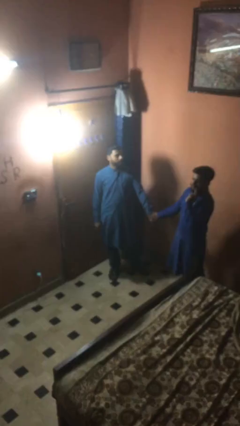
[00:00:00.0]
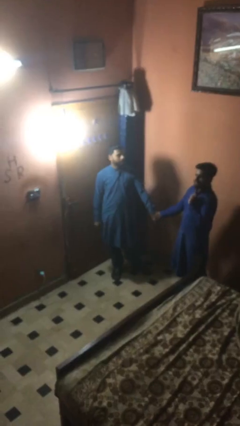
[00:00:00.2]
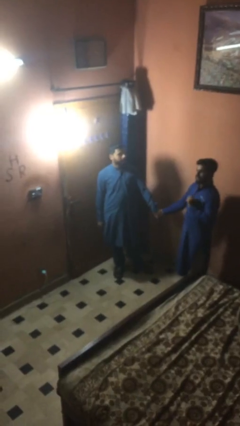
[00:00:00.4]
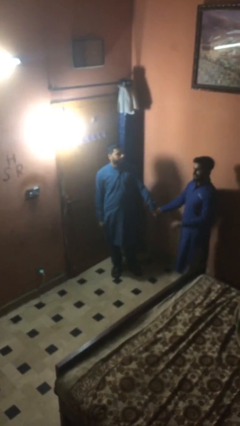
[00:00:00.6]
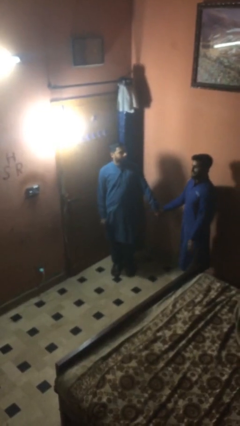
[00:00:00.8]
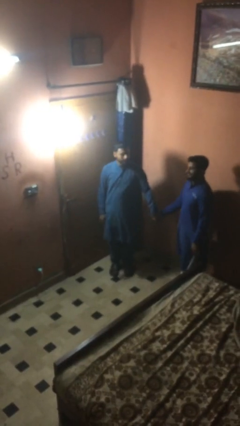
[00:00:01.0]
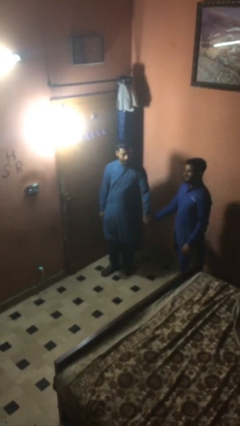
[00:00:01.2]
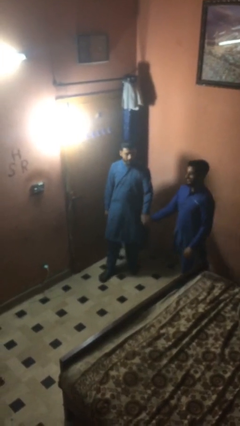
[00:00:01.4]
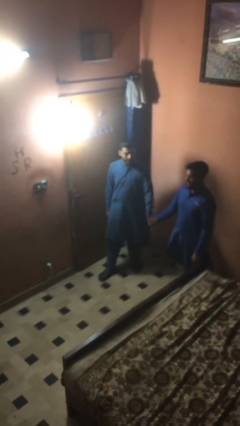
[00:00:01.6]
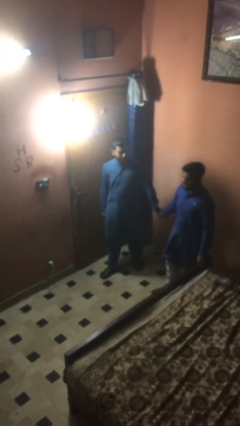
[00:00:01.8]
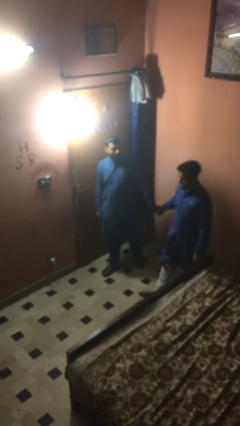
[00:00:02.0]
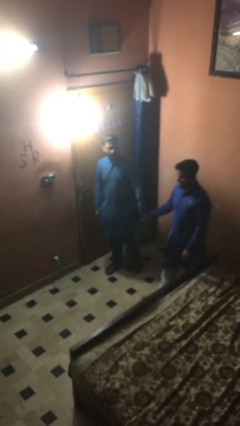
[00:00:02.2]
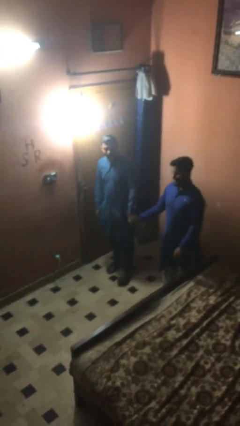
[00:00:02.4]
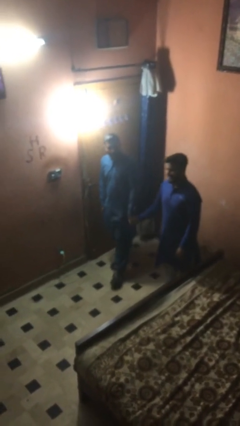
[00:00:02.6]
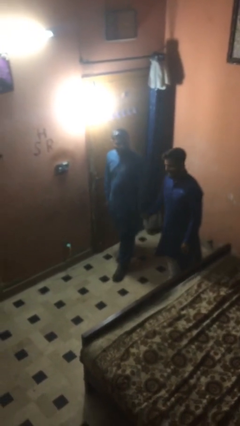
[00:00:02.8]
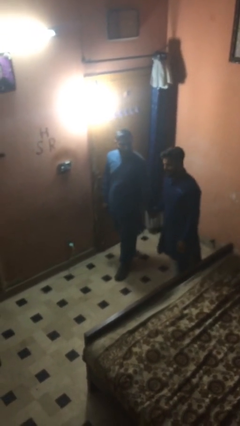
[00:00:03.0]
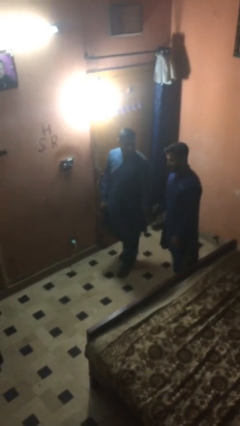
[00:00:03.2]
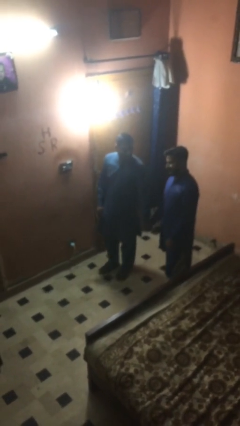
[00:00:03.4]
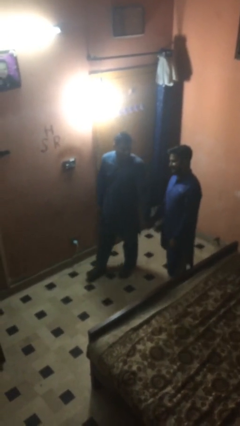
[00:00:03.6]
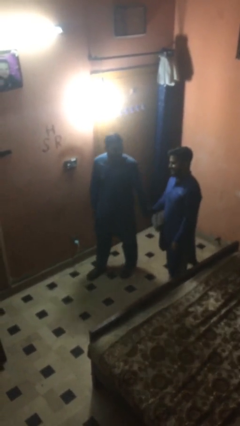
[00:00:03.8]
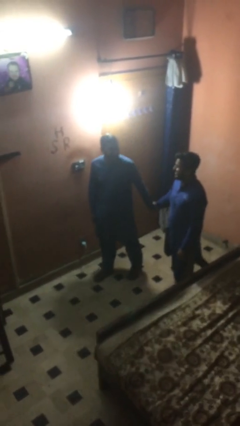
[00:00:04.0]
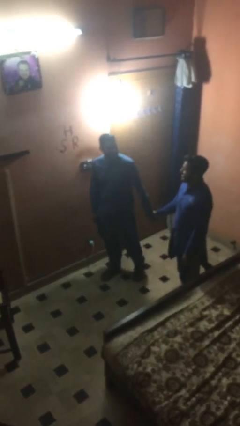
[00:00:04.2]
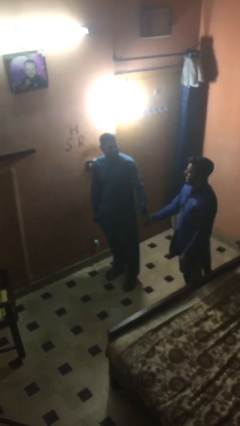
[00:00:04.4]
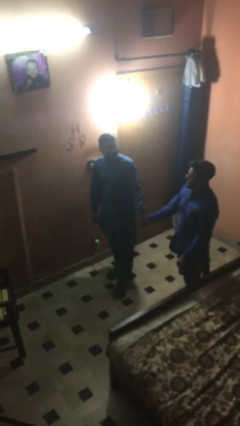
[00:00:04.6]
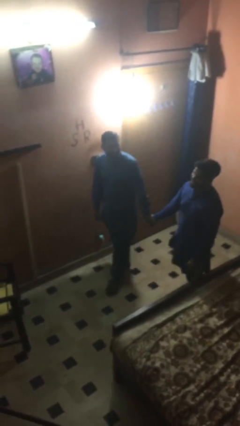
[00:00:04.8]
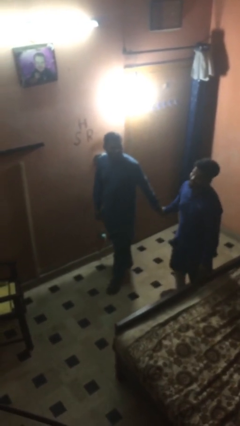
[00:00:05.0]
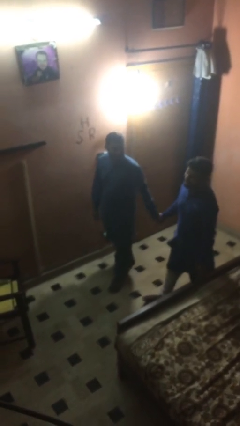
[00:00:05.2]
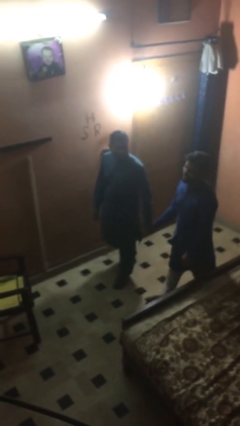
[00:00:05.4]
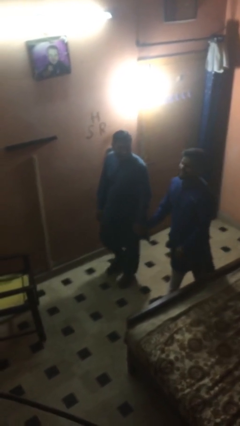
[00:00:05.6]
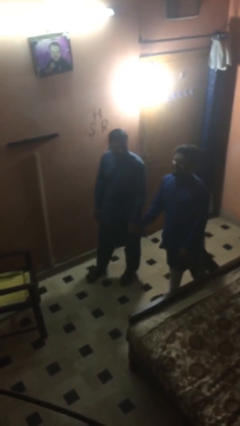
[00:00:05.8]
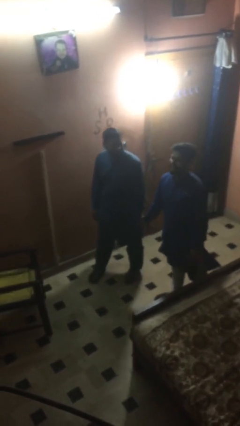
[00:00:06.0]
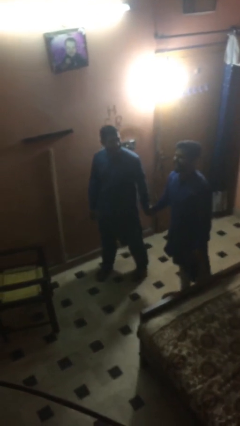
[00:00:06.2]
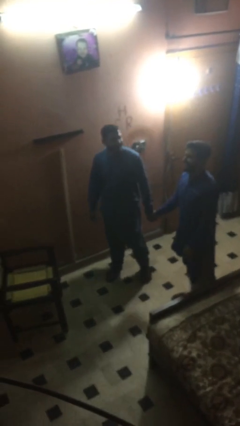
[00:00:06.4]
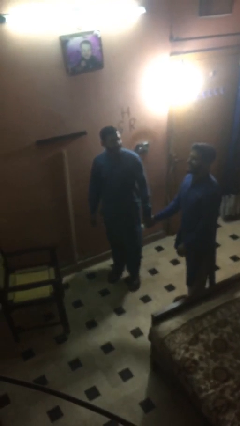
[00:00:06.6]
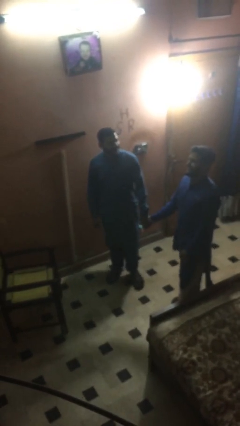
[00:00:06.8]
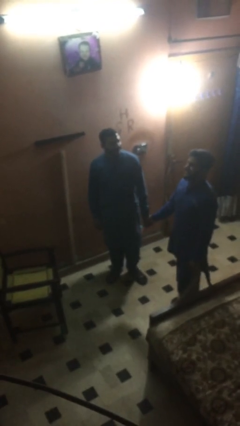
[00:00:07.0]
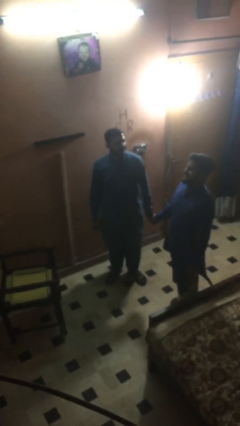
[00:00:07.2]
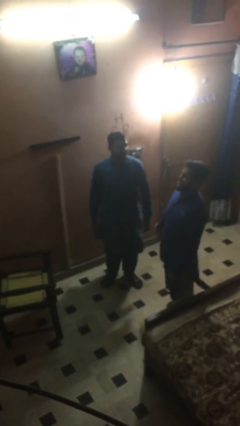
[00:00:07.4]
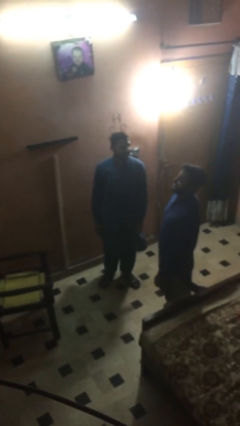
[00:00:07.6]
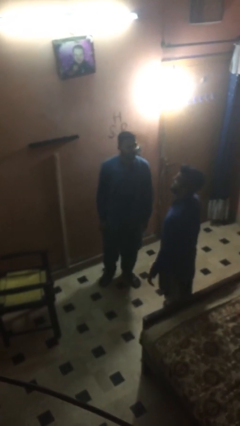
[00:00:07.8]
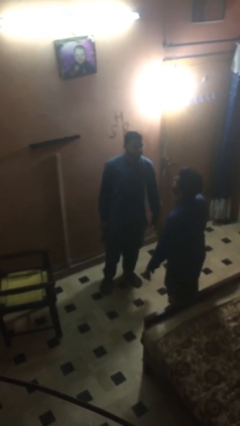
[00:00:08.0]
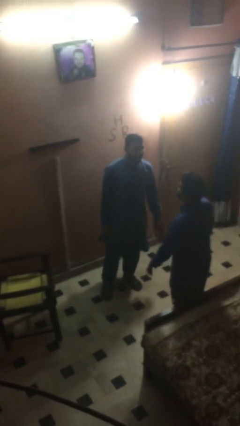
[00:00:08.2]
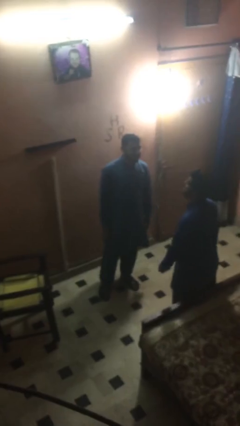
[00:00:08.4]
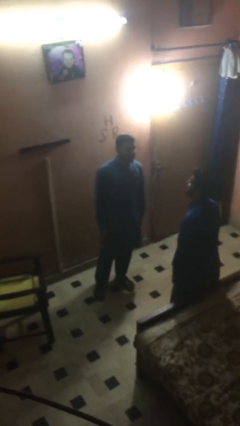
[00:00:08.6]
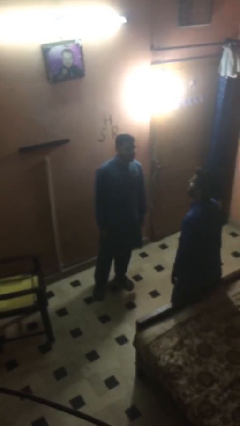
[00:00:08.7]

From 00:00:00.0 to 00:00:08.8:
person holds hand

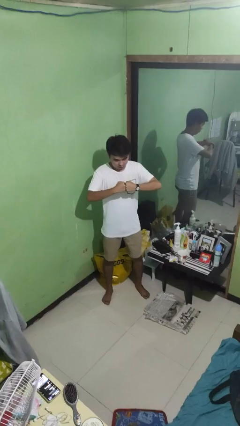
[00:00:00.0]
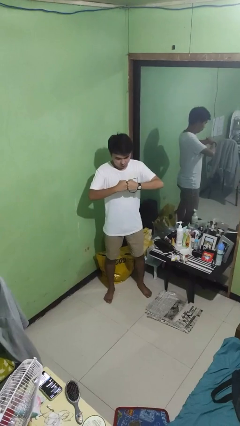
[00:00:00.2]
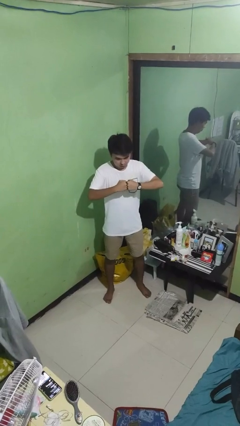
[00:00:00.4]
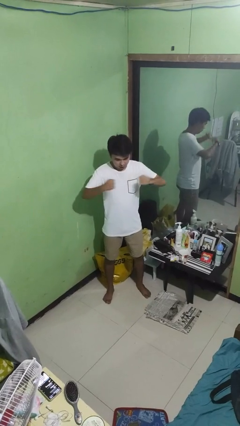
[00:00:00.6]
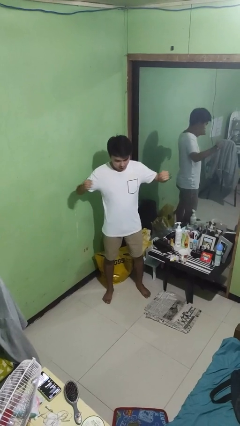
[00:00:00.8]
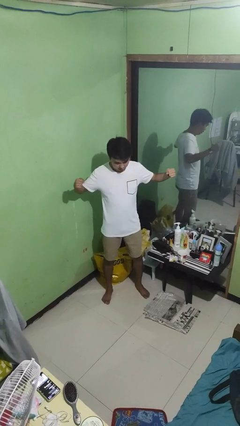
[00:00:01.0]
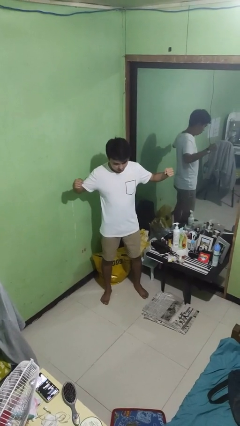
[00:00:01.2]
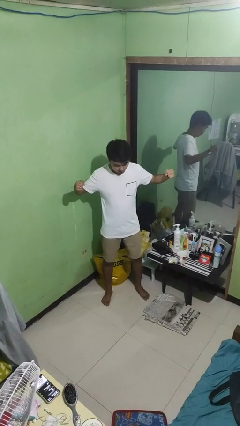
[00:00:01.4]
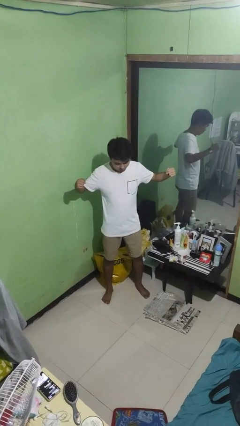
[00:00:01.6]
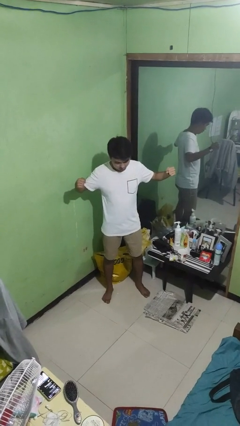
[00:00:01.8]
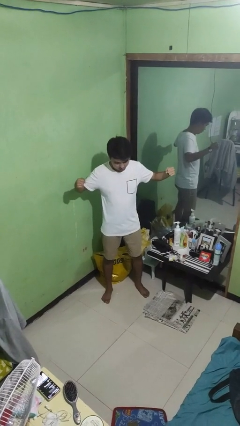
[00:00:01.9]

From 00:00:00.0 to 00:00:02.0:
person gestures zoom in

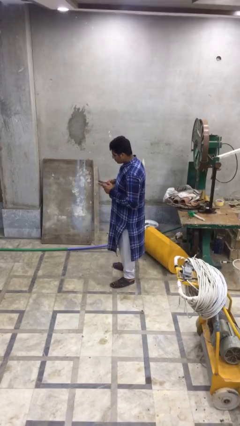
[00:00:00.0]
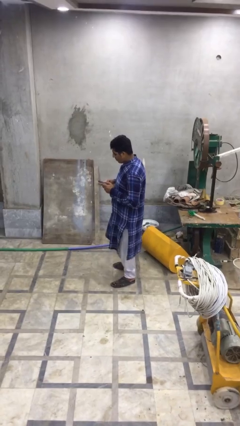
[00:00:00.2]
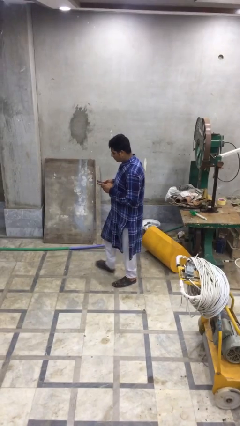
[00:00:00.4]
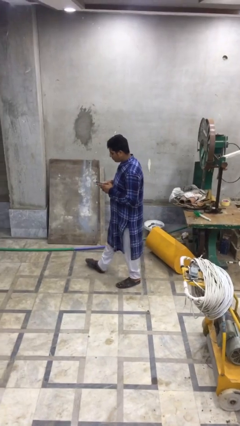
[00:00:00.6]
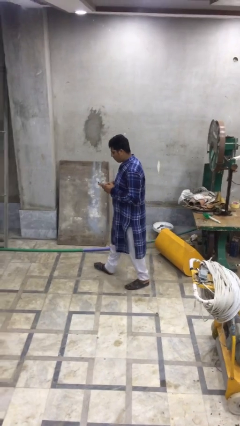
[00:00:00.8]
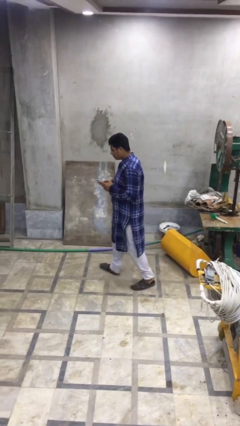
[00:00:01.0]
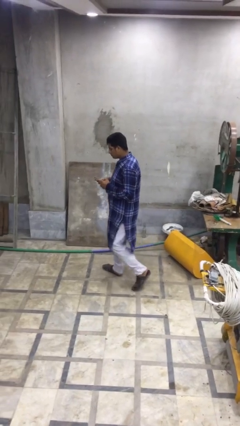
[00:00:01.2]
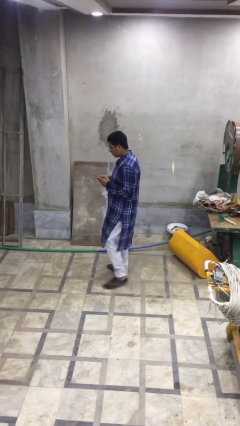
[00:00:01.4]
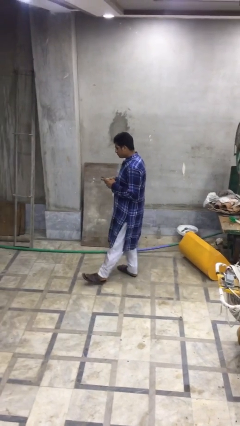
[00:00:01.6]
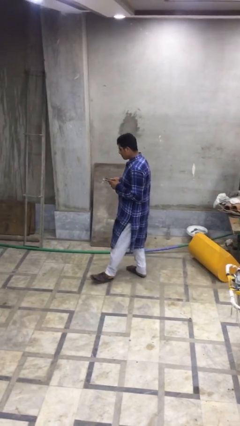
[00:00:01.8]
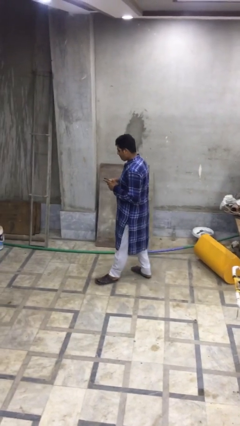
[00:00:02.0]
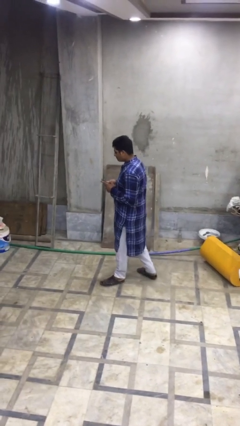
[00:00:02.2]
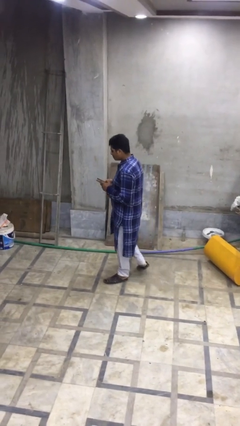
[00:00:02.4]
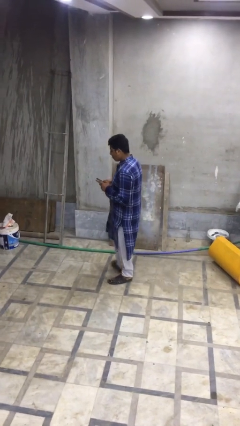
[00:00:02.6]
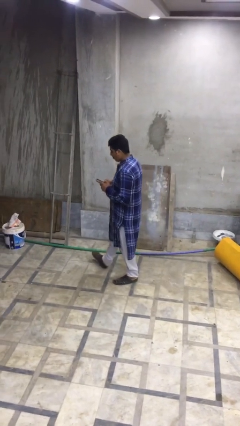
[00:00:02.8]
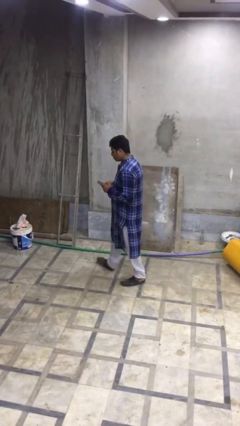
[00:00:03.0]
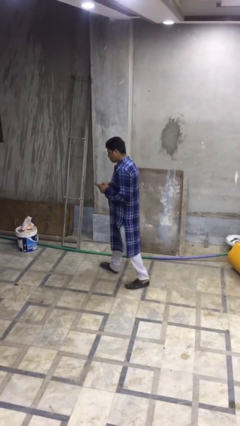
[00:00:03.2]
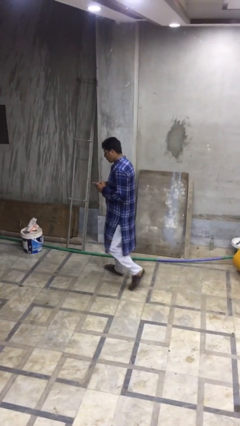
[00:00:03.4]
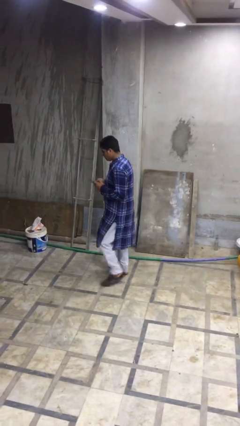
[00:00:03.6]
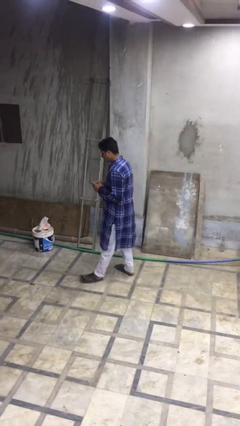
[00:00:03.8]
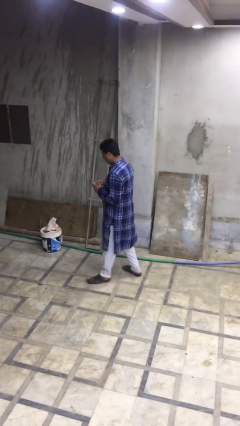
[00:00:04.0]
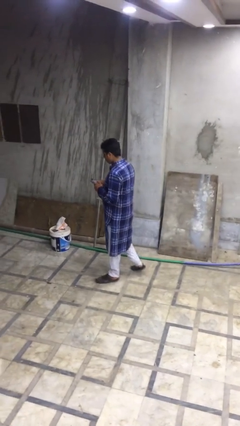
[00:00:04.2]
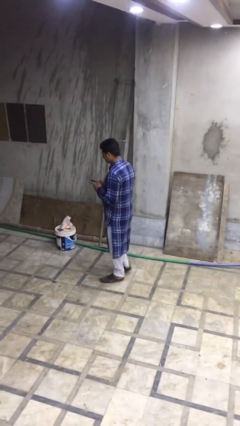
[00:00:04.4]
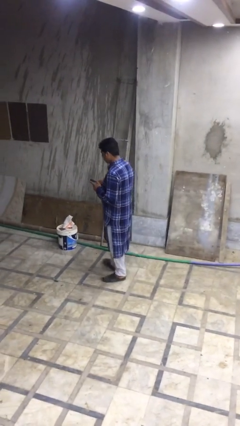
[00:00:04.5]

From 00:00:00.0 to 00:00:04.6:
person texts on phone

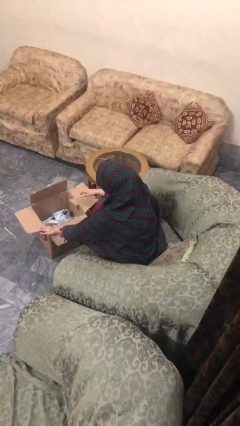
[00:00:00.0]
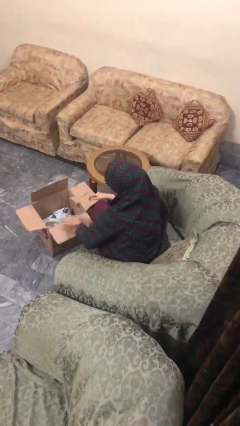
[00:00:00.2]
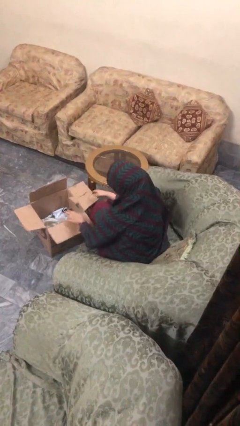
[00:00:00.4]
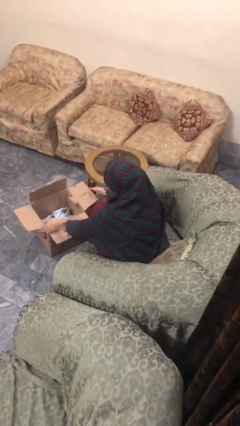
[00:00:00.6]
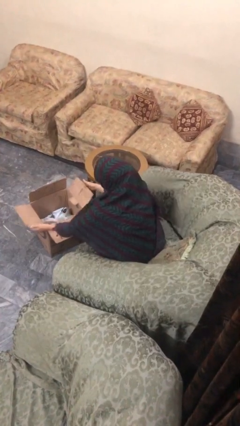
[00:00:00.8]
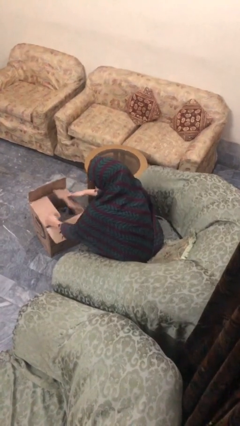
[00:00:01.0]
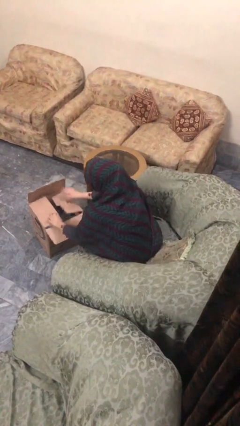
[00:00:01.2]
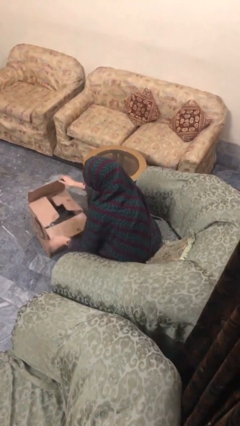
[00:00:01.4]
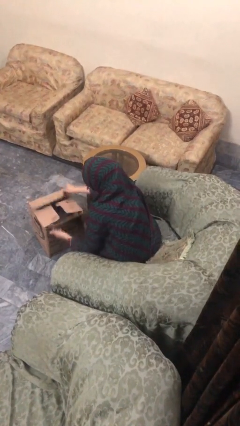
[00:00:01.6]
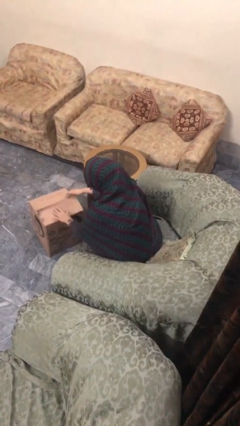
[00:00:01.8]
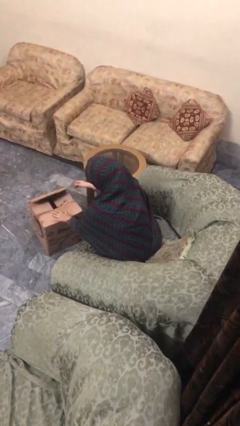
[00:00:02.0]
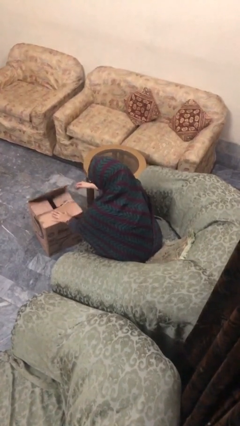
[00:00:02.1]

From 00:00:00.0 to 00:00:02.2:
person closes box
